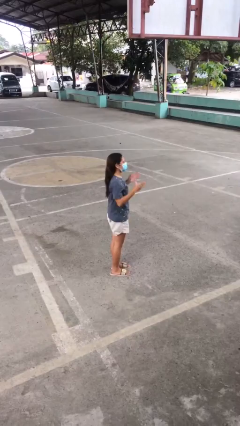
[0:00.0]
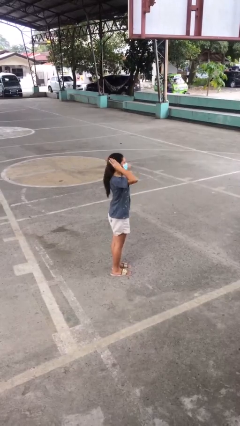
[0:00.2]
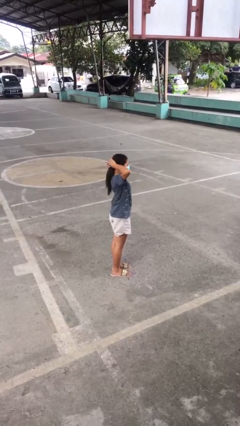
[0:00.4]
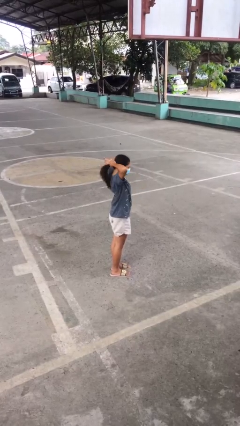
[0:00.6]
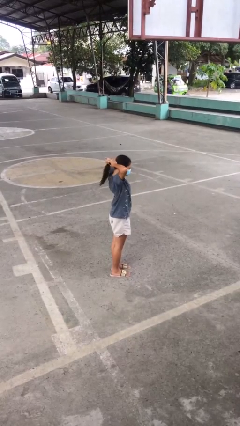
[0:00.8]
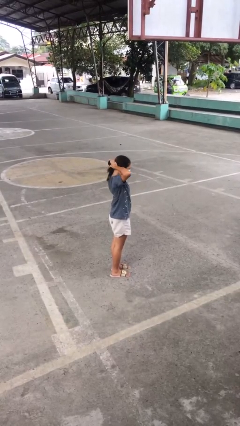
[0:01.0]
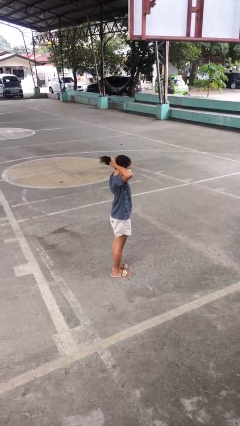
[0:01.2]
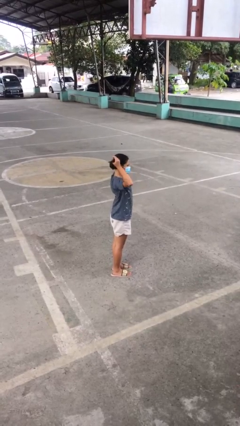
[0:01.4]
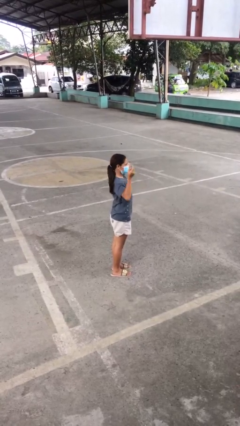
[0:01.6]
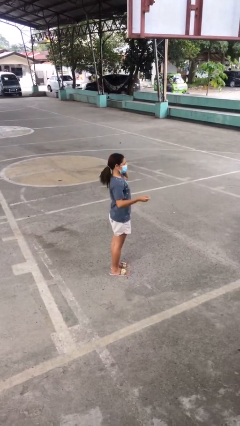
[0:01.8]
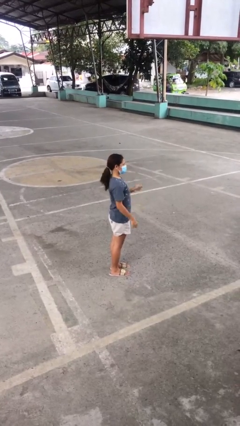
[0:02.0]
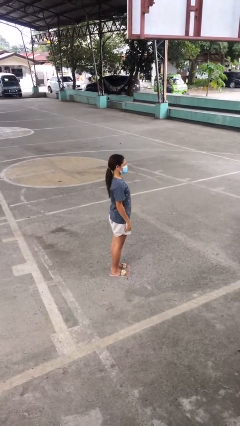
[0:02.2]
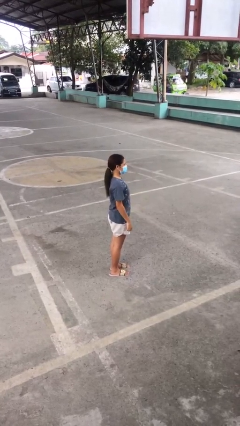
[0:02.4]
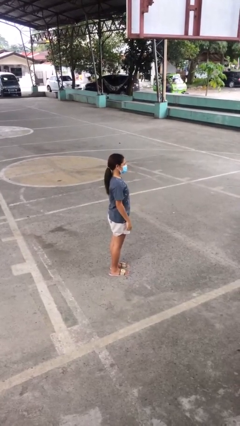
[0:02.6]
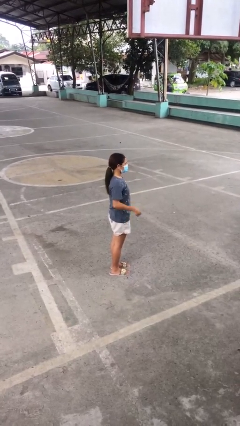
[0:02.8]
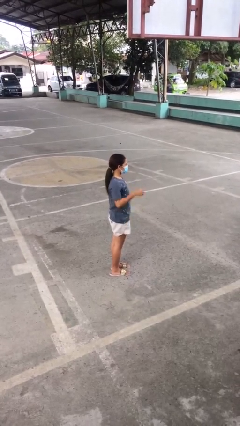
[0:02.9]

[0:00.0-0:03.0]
person puts hair in ponytail

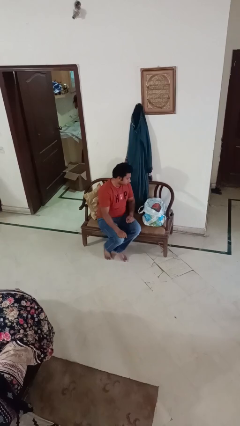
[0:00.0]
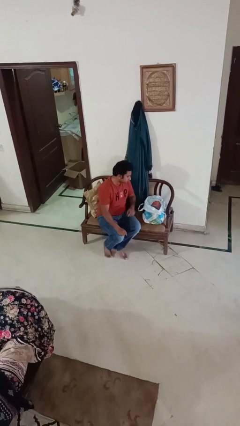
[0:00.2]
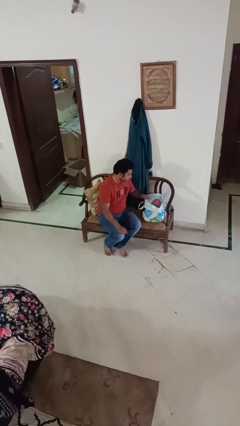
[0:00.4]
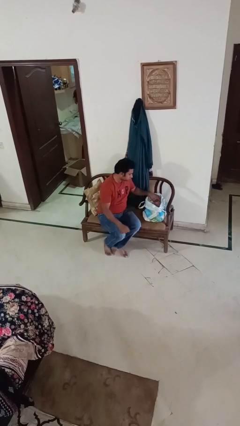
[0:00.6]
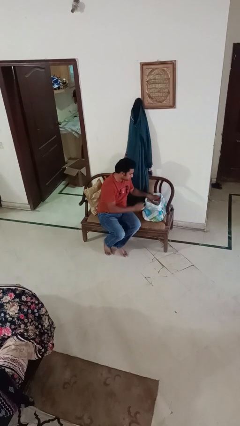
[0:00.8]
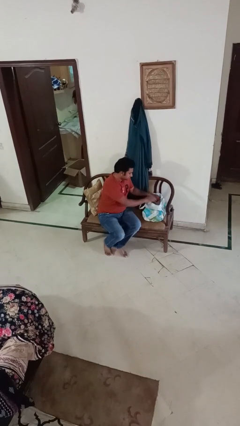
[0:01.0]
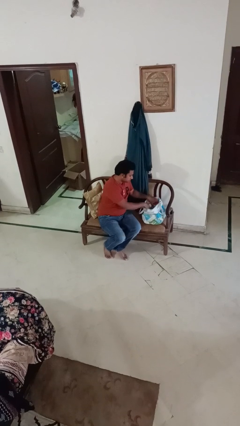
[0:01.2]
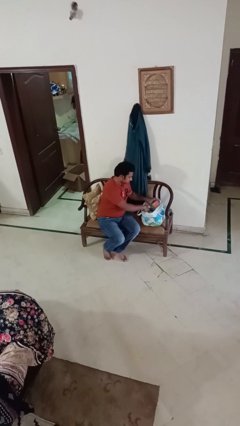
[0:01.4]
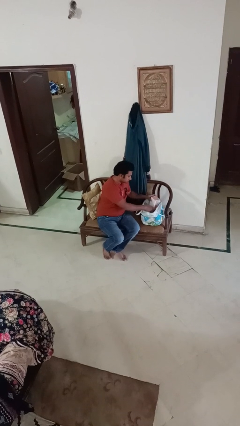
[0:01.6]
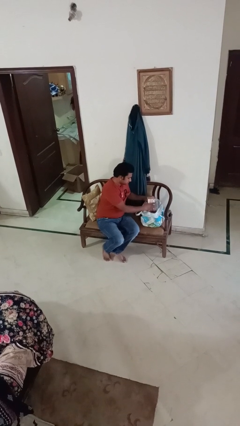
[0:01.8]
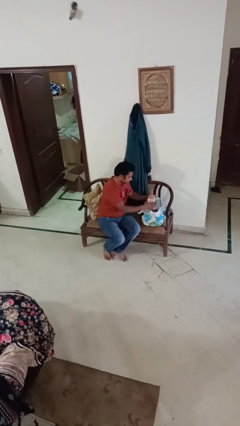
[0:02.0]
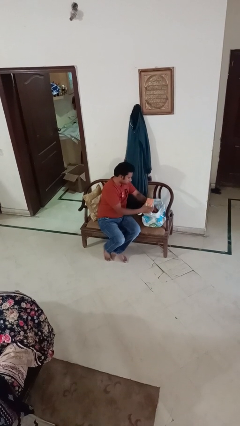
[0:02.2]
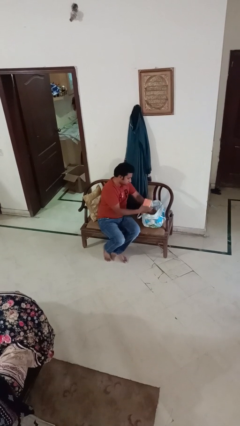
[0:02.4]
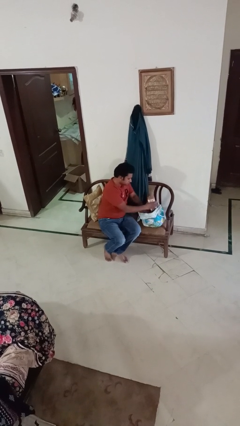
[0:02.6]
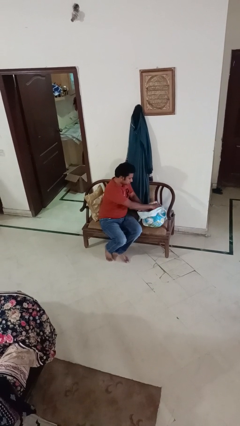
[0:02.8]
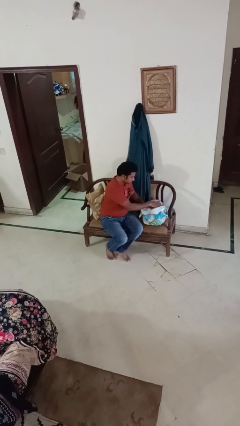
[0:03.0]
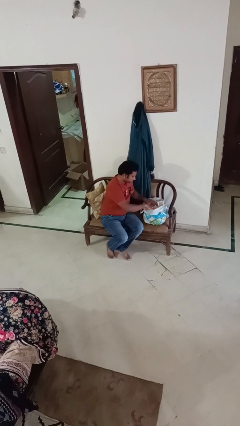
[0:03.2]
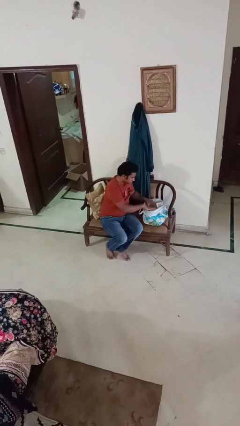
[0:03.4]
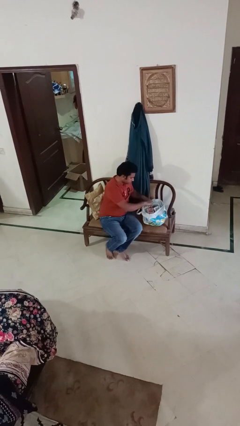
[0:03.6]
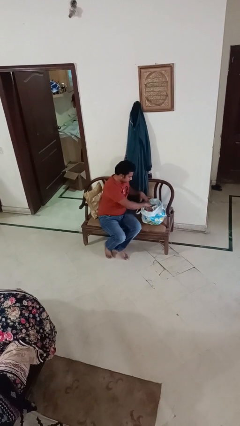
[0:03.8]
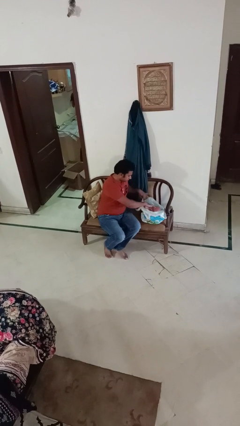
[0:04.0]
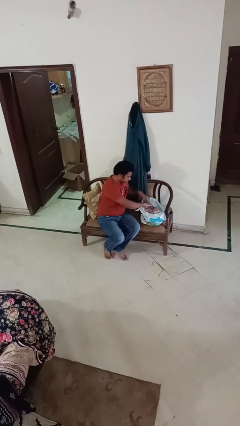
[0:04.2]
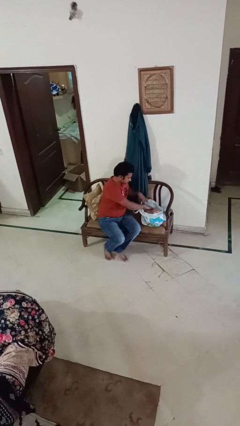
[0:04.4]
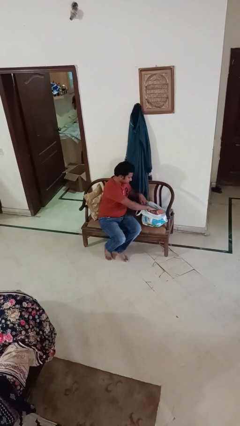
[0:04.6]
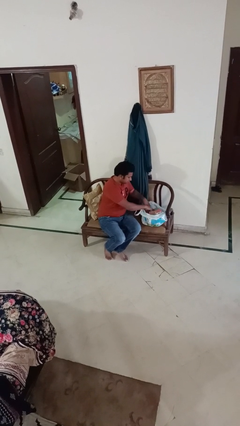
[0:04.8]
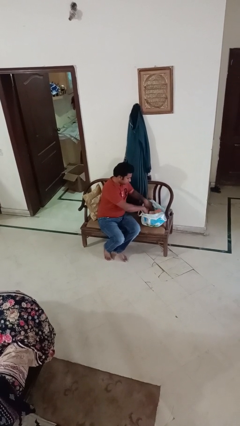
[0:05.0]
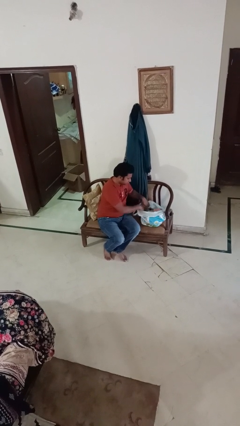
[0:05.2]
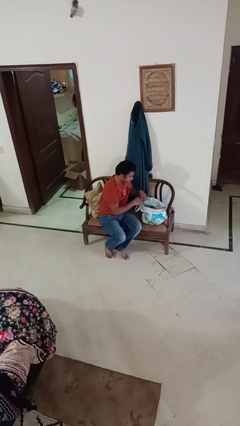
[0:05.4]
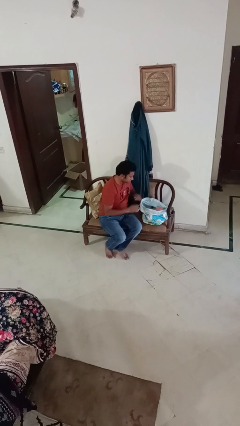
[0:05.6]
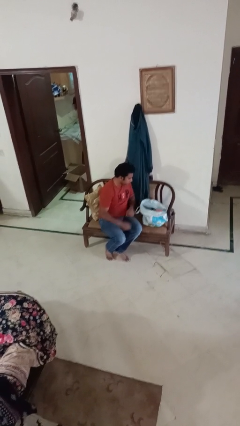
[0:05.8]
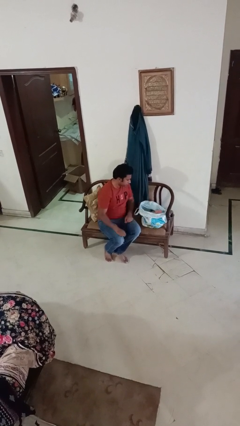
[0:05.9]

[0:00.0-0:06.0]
person searches in bag

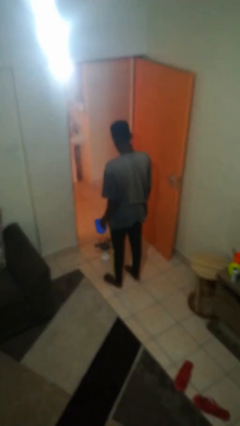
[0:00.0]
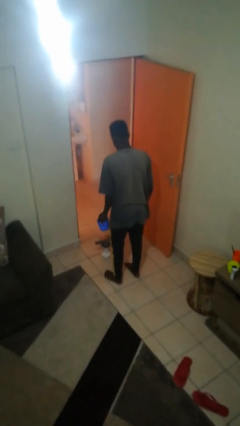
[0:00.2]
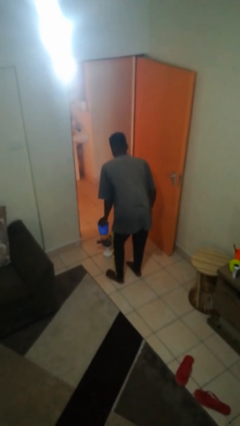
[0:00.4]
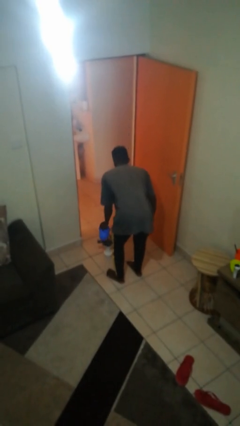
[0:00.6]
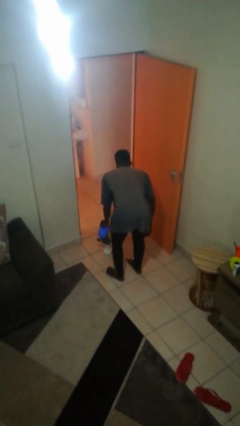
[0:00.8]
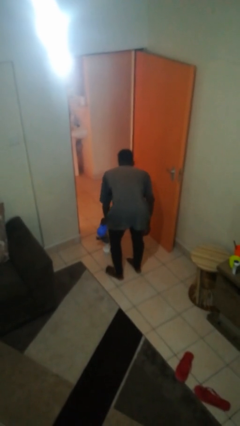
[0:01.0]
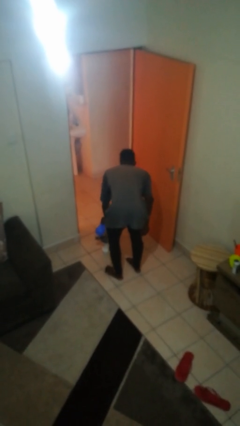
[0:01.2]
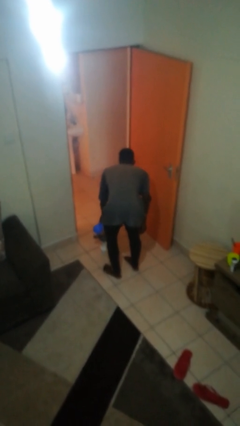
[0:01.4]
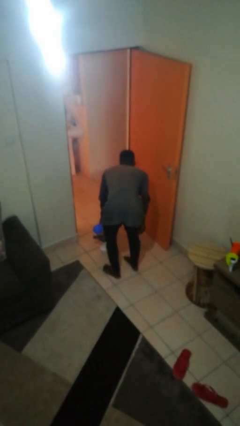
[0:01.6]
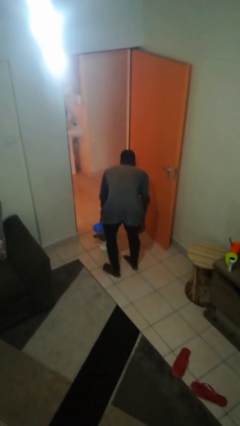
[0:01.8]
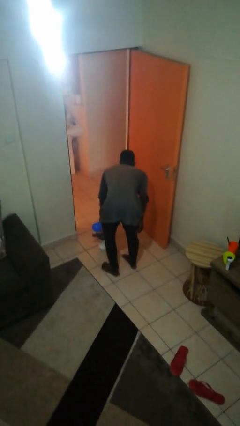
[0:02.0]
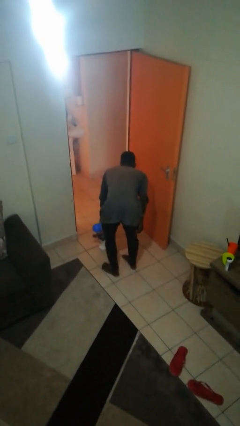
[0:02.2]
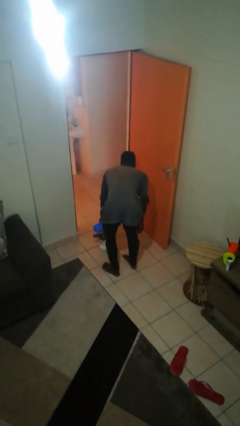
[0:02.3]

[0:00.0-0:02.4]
person waters houseplant

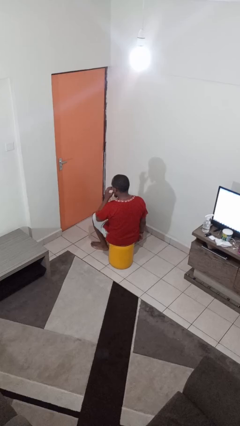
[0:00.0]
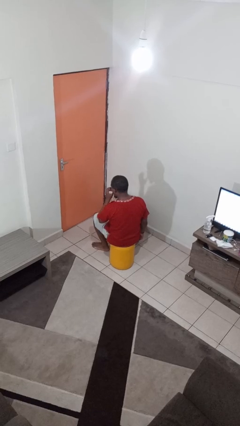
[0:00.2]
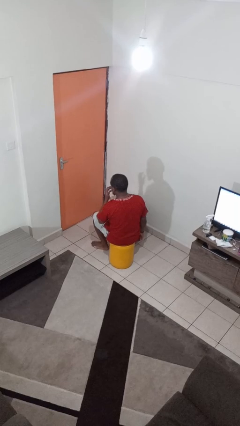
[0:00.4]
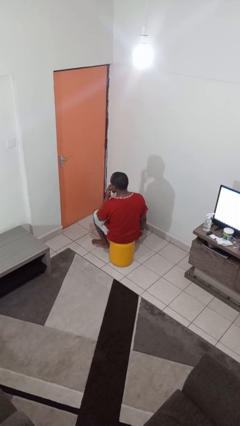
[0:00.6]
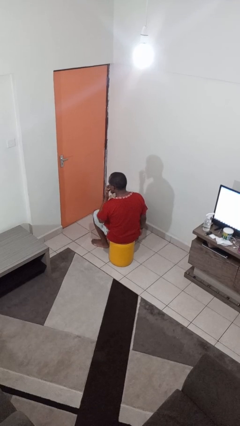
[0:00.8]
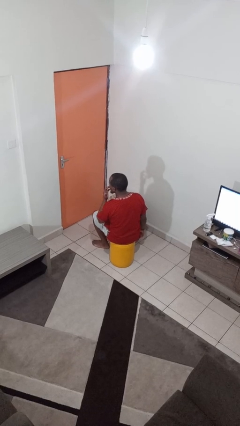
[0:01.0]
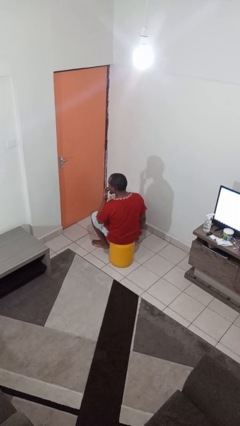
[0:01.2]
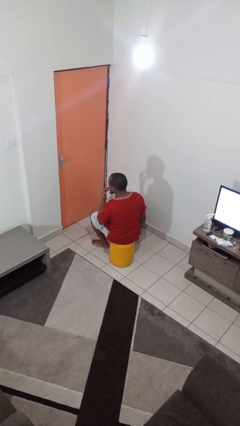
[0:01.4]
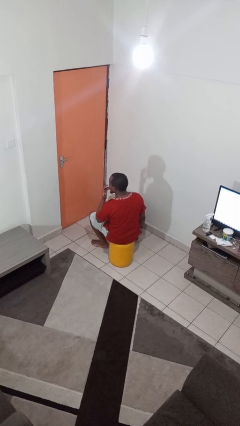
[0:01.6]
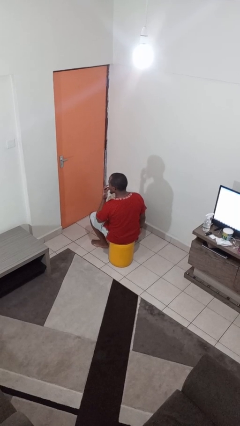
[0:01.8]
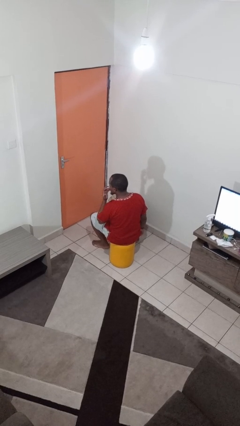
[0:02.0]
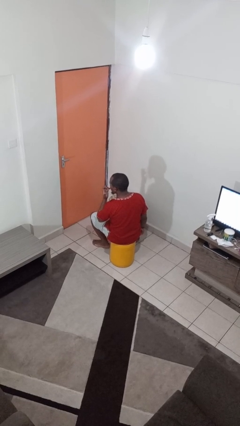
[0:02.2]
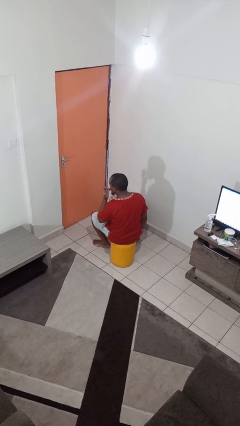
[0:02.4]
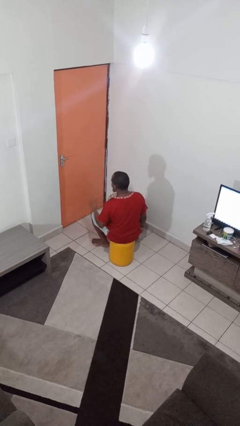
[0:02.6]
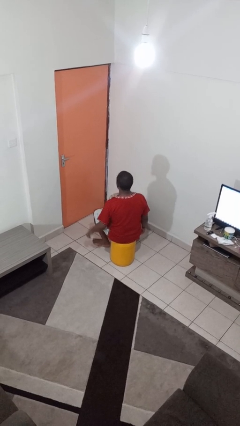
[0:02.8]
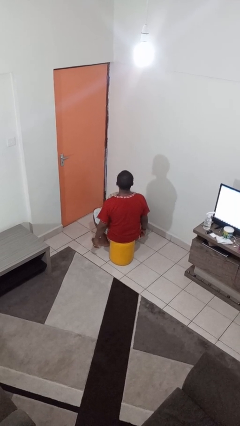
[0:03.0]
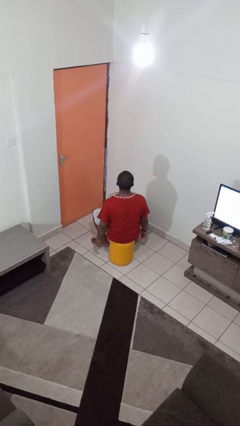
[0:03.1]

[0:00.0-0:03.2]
person licks fingers

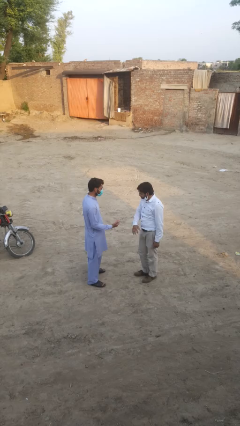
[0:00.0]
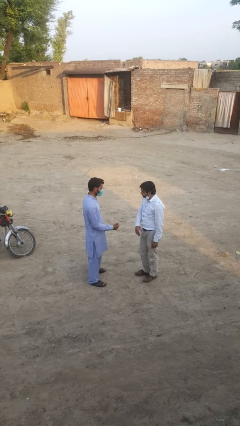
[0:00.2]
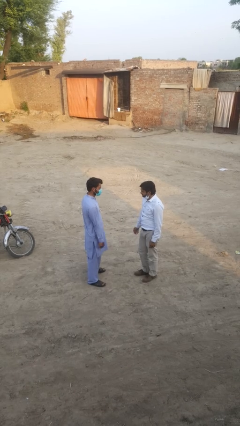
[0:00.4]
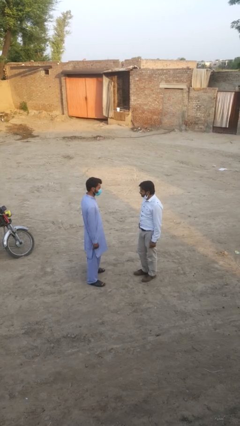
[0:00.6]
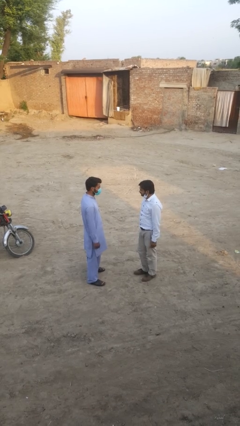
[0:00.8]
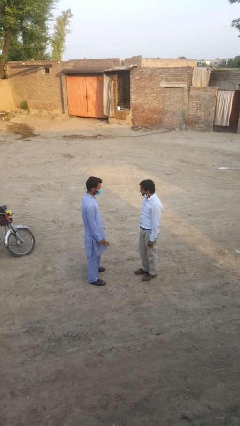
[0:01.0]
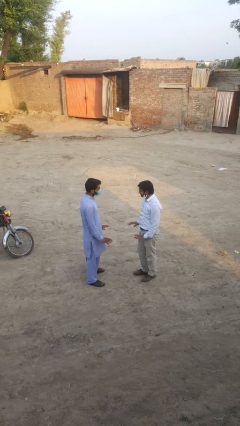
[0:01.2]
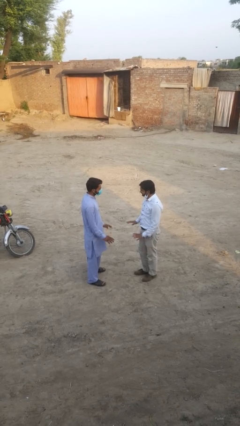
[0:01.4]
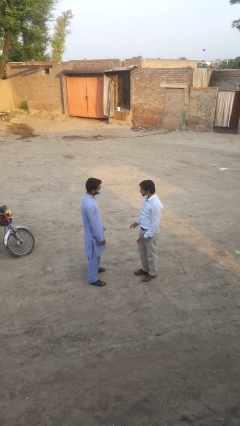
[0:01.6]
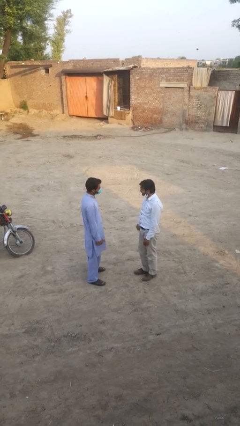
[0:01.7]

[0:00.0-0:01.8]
person highfives hand

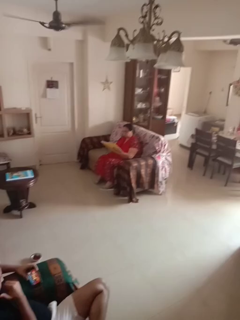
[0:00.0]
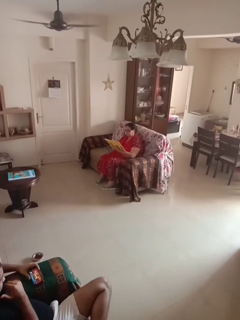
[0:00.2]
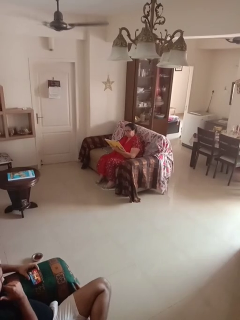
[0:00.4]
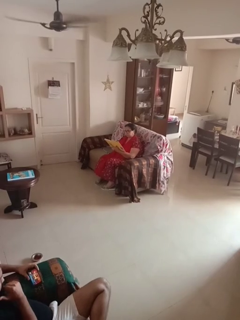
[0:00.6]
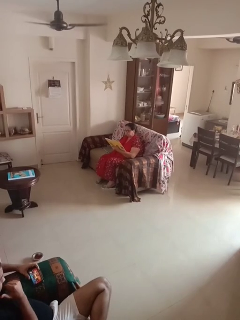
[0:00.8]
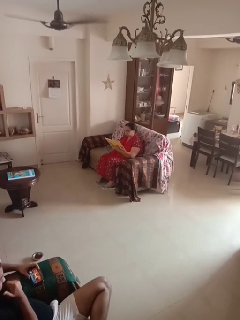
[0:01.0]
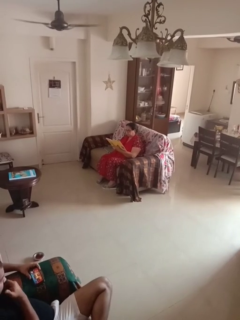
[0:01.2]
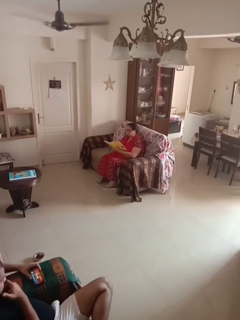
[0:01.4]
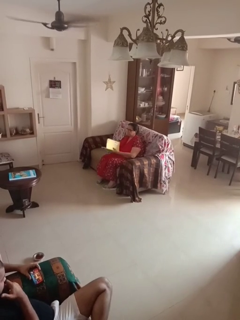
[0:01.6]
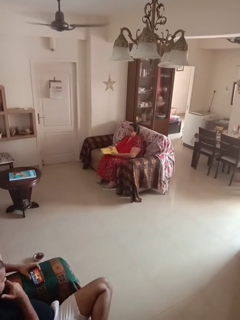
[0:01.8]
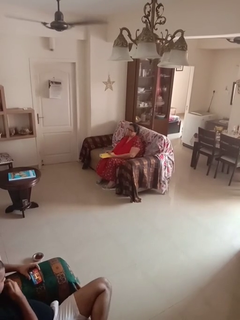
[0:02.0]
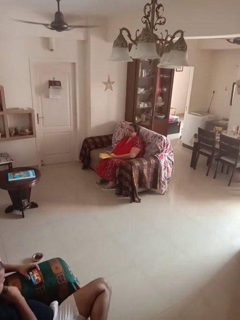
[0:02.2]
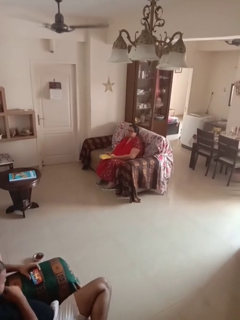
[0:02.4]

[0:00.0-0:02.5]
person reads document
